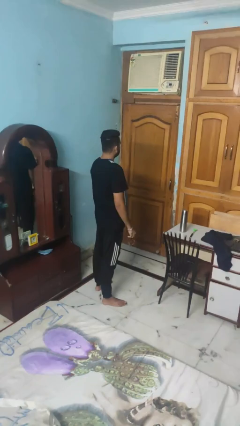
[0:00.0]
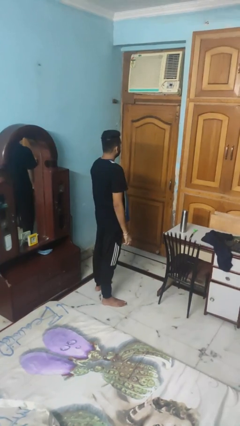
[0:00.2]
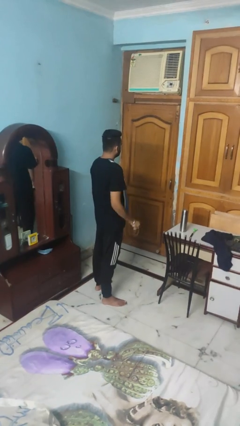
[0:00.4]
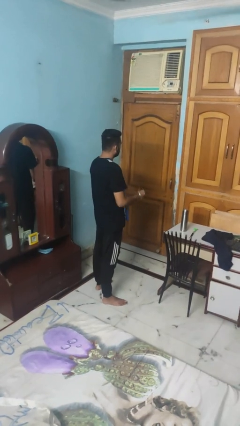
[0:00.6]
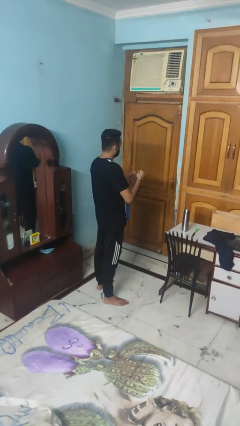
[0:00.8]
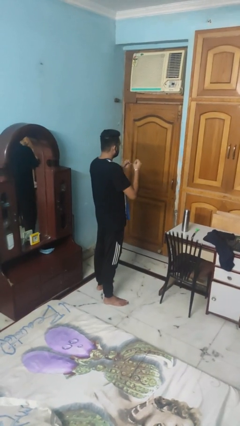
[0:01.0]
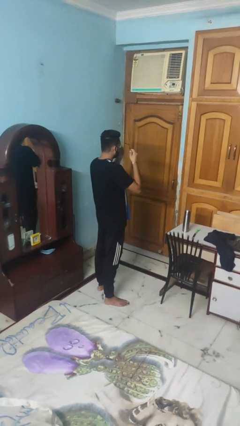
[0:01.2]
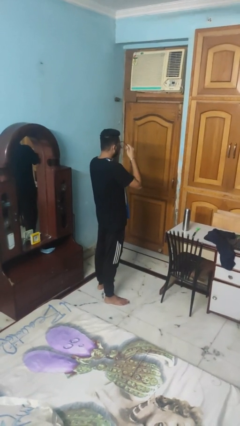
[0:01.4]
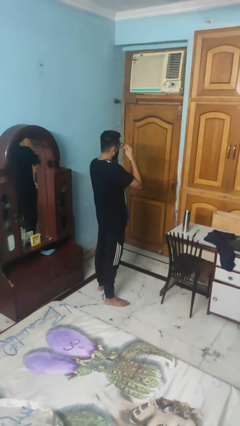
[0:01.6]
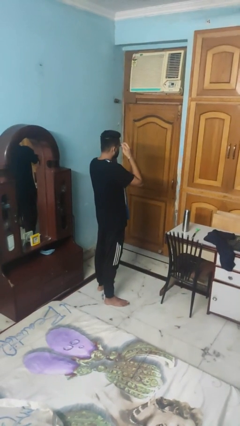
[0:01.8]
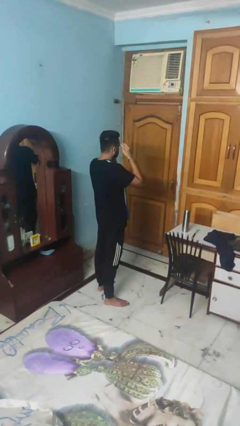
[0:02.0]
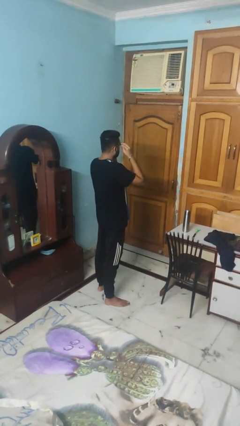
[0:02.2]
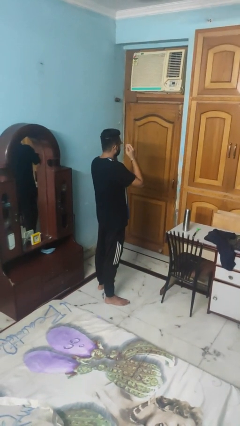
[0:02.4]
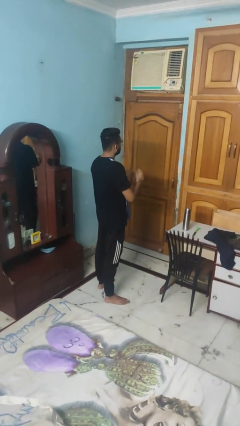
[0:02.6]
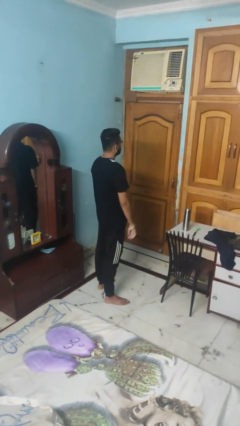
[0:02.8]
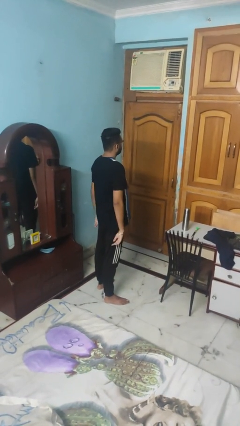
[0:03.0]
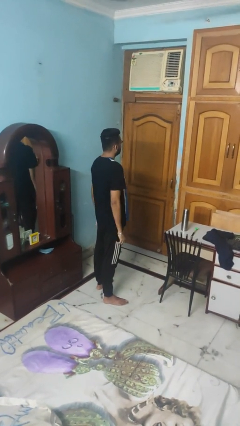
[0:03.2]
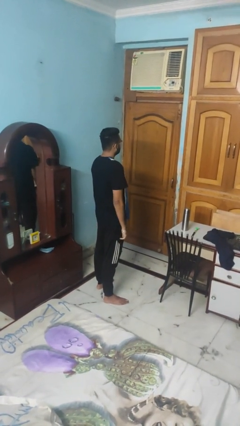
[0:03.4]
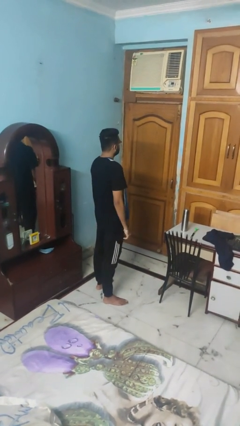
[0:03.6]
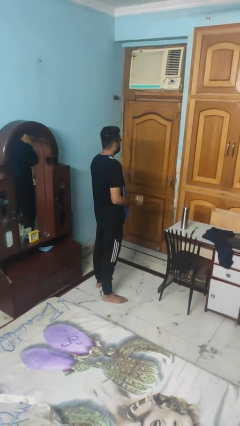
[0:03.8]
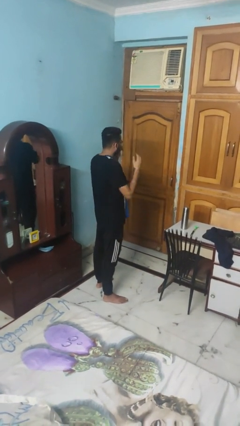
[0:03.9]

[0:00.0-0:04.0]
person puts on glasses

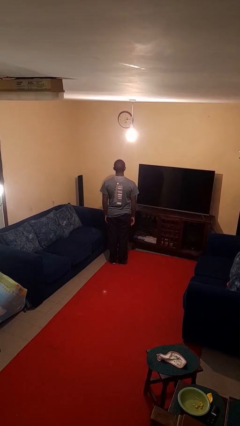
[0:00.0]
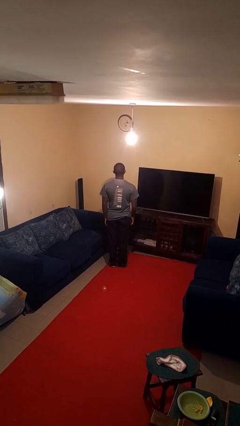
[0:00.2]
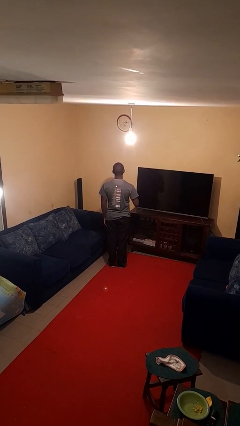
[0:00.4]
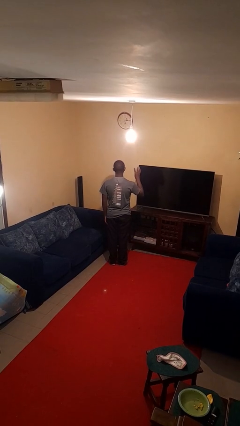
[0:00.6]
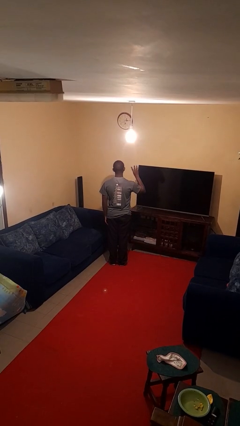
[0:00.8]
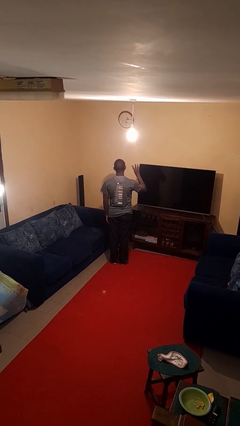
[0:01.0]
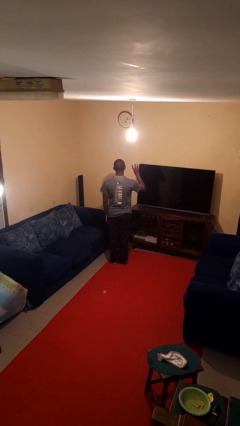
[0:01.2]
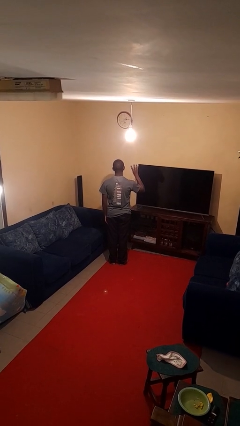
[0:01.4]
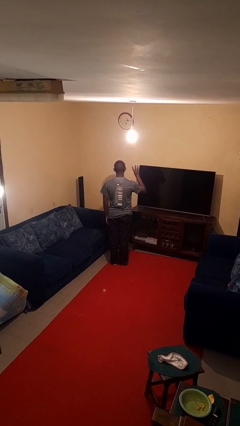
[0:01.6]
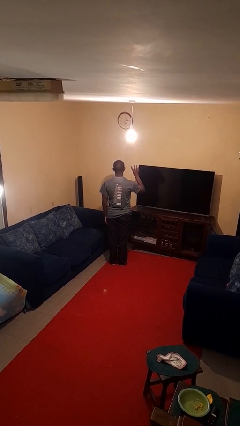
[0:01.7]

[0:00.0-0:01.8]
person gestures number four

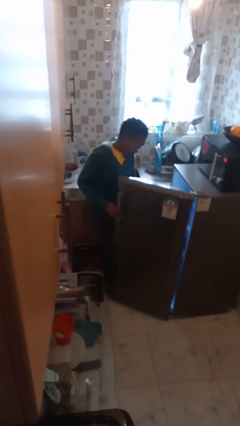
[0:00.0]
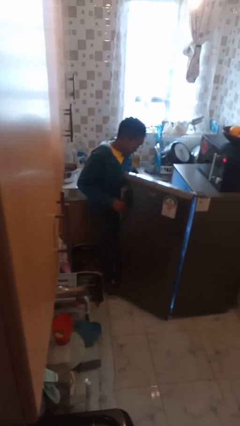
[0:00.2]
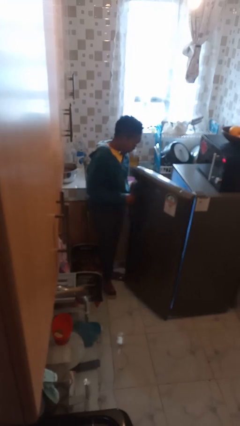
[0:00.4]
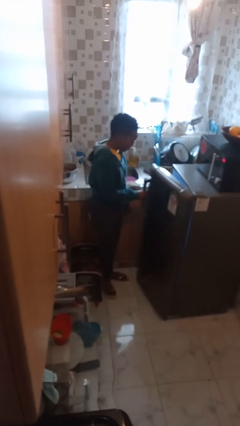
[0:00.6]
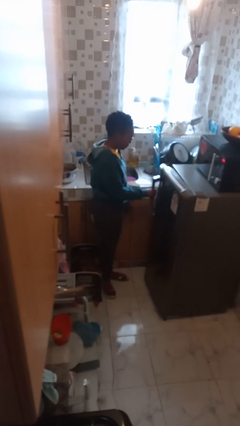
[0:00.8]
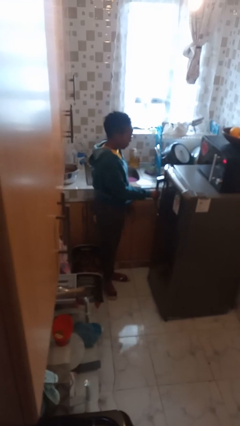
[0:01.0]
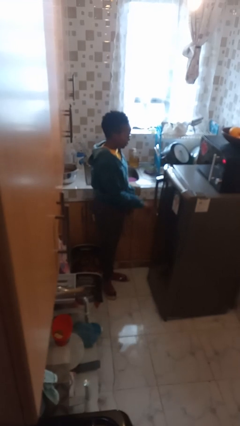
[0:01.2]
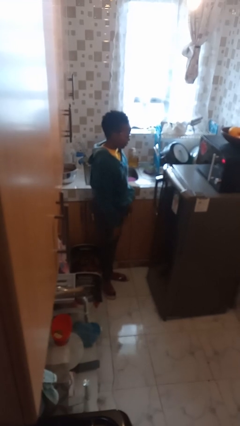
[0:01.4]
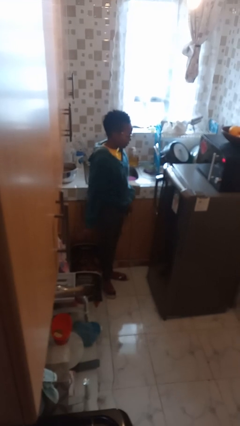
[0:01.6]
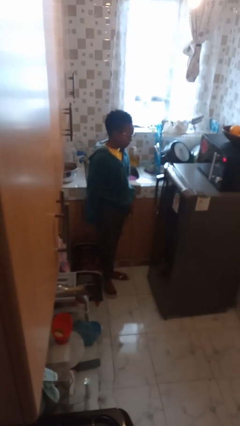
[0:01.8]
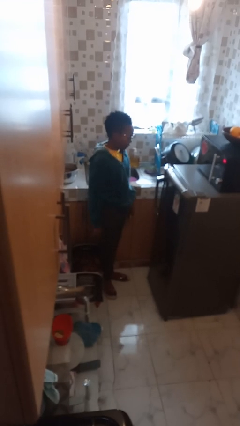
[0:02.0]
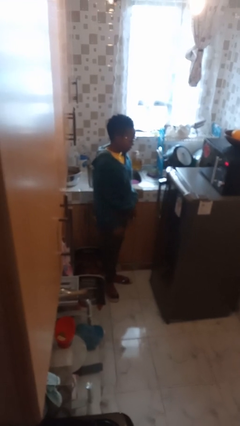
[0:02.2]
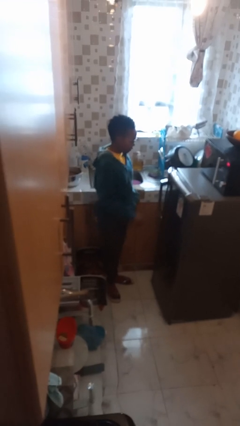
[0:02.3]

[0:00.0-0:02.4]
person closes refrigerator

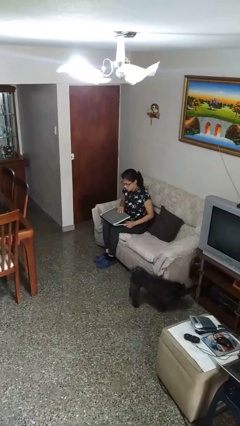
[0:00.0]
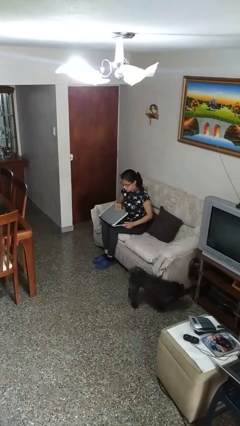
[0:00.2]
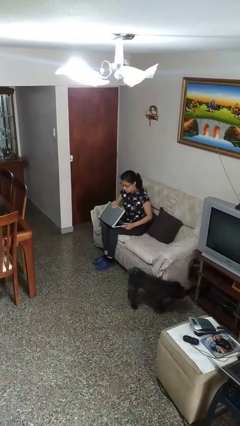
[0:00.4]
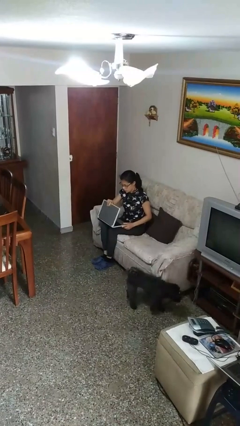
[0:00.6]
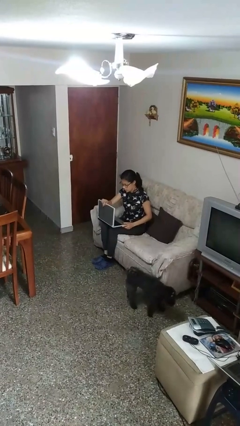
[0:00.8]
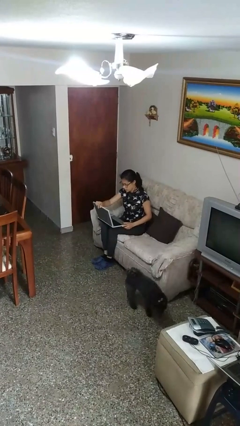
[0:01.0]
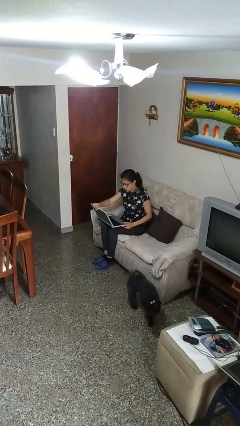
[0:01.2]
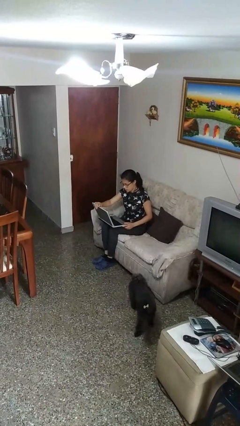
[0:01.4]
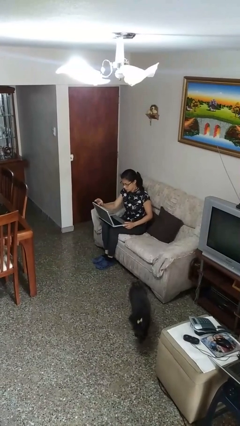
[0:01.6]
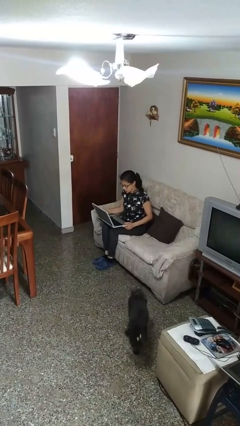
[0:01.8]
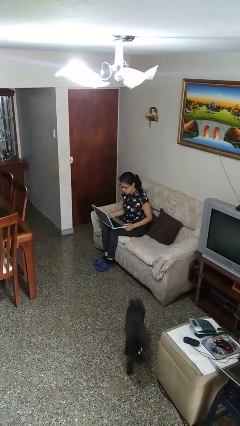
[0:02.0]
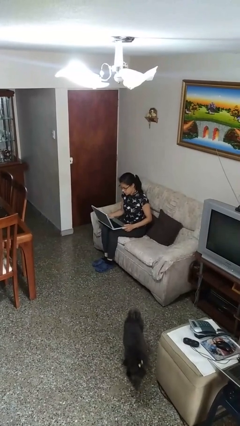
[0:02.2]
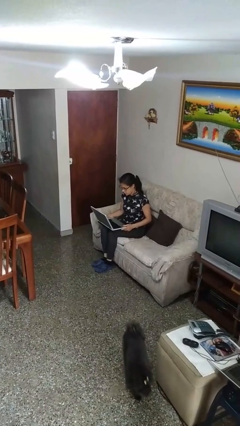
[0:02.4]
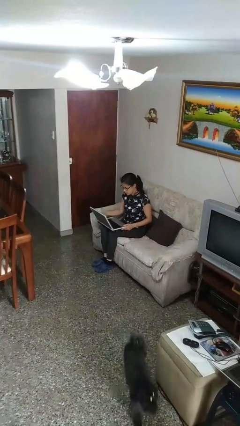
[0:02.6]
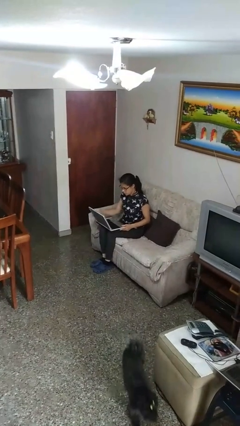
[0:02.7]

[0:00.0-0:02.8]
person opens laptop

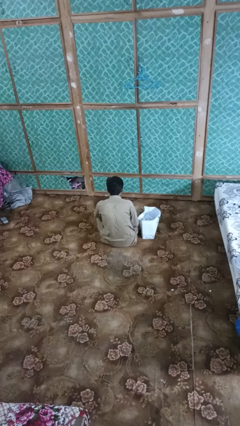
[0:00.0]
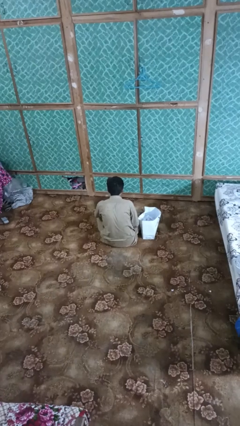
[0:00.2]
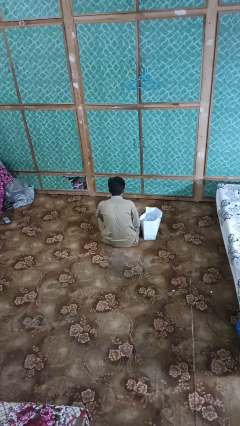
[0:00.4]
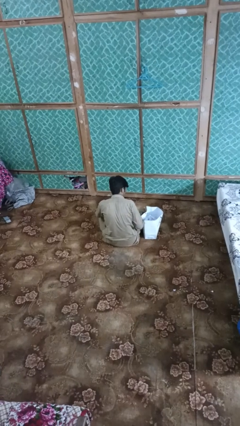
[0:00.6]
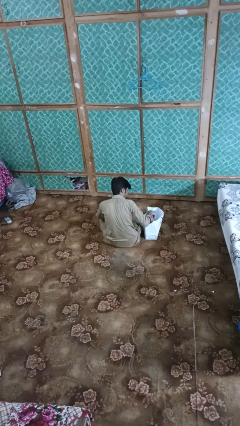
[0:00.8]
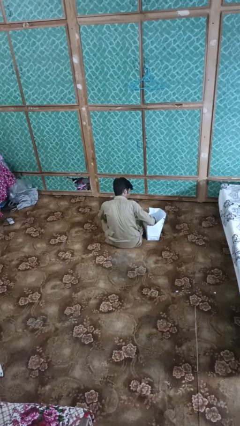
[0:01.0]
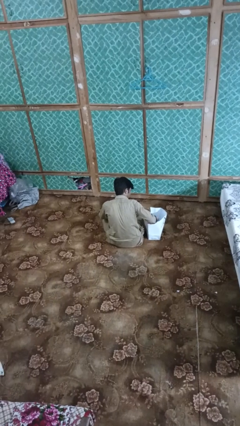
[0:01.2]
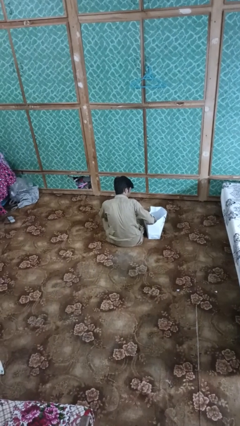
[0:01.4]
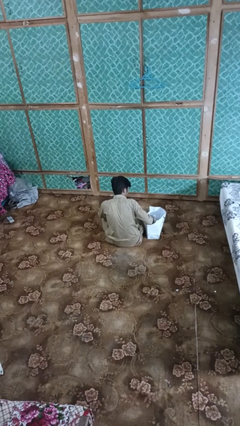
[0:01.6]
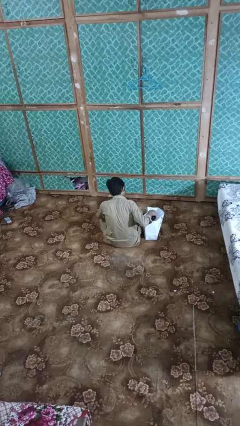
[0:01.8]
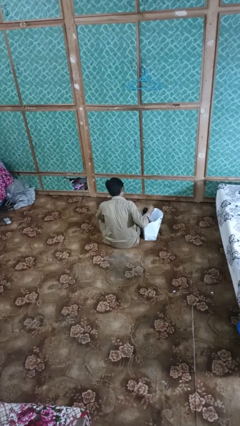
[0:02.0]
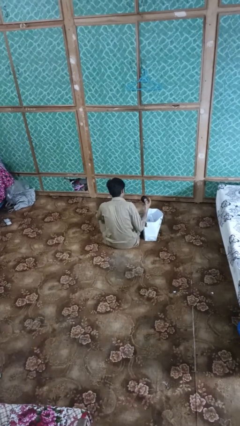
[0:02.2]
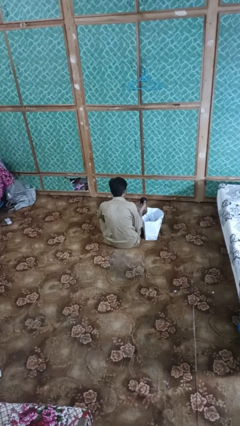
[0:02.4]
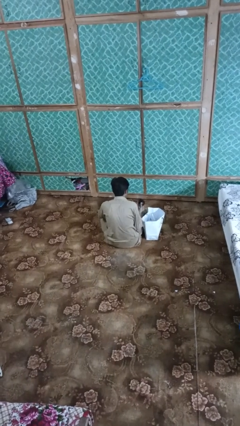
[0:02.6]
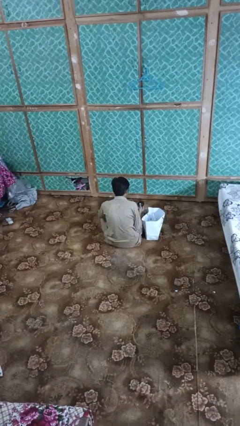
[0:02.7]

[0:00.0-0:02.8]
person takes object from bag

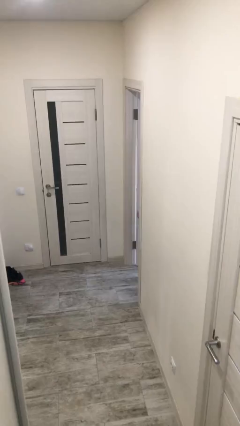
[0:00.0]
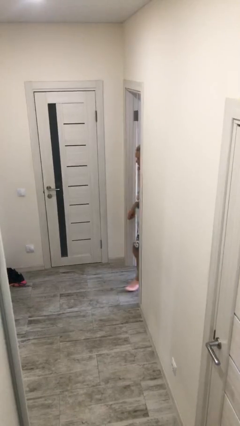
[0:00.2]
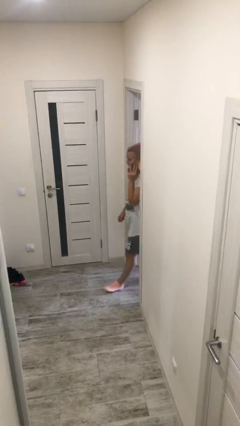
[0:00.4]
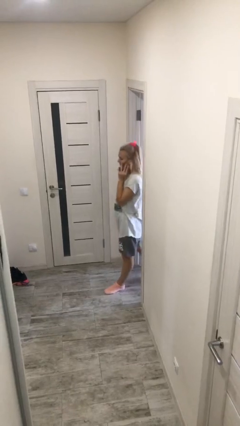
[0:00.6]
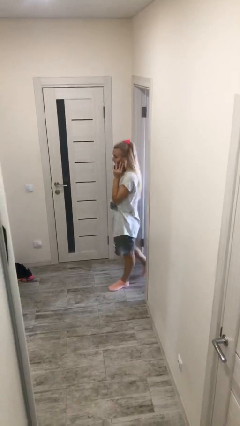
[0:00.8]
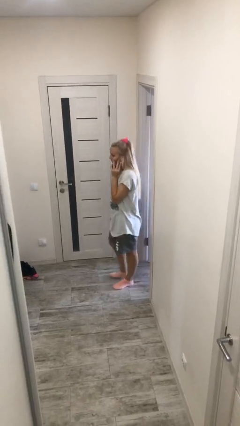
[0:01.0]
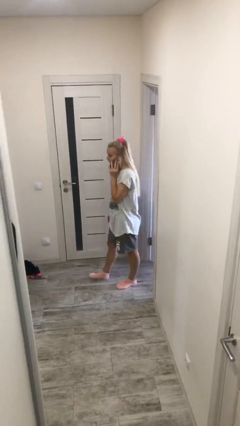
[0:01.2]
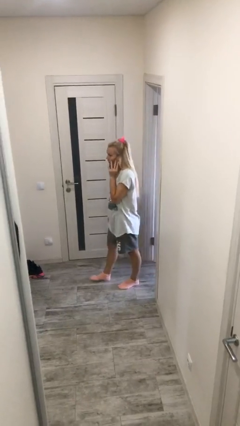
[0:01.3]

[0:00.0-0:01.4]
person enters scene through structure

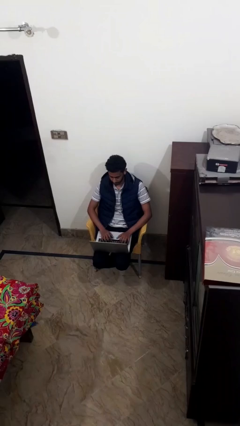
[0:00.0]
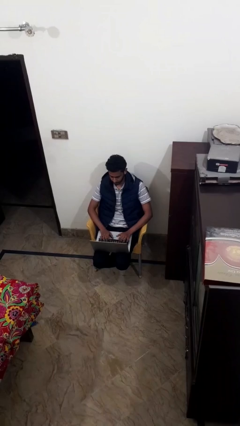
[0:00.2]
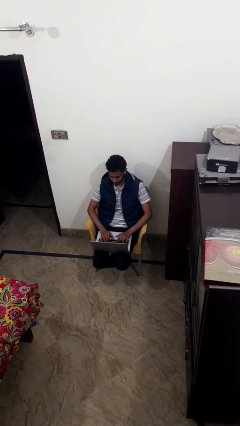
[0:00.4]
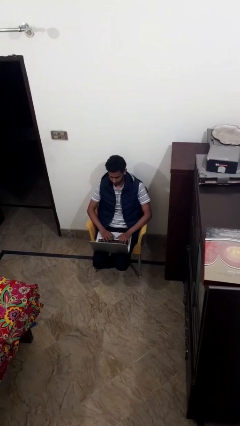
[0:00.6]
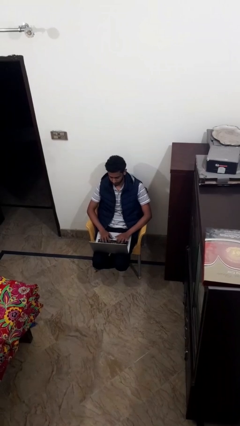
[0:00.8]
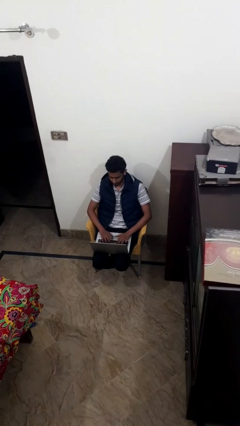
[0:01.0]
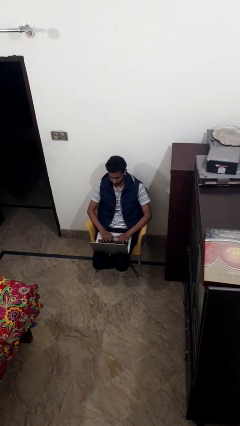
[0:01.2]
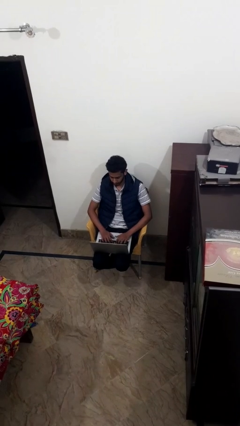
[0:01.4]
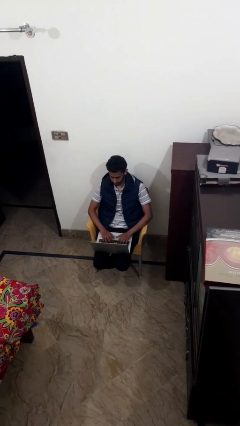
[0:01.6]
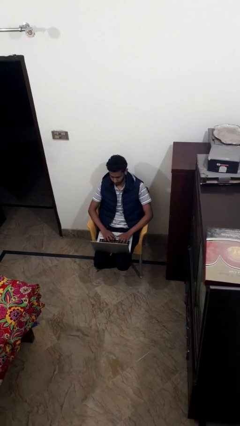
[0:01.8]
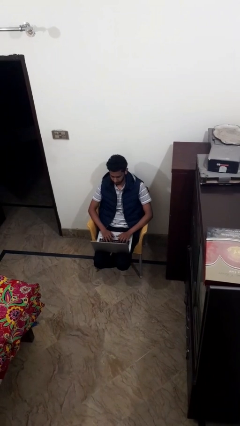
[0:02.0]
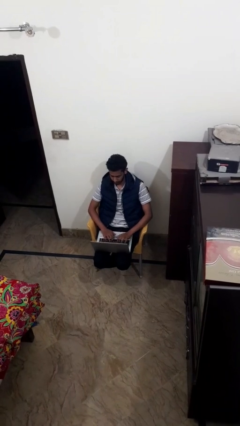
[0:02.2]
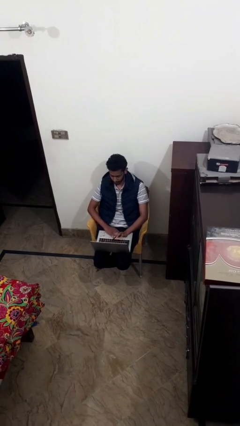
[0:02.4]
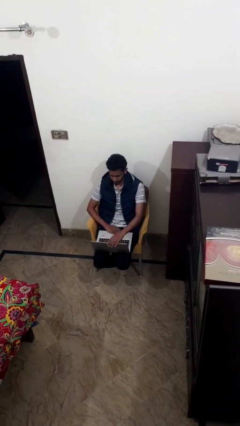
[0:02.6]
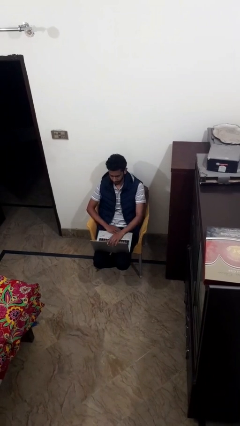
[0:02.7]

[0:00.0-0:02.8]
person interacts with laptop
